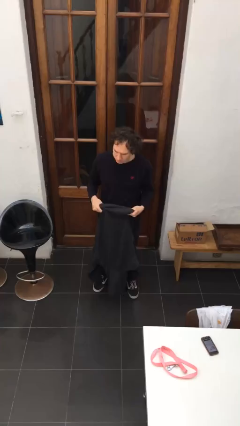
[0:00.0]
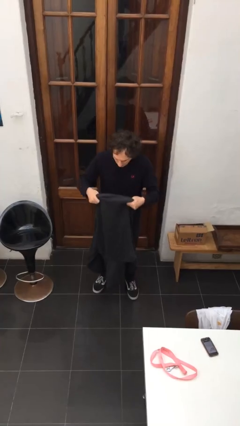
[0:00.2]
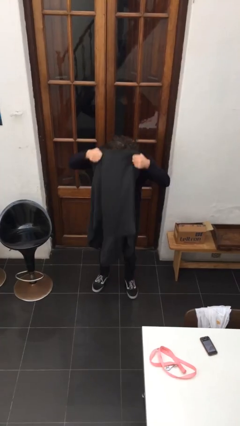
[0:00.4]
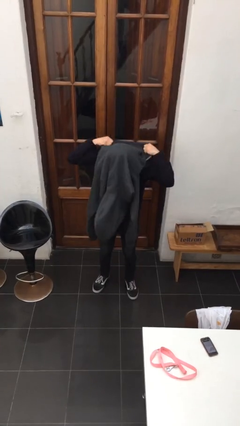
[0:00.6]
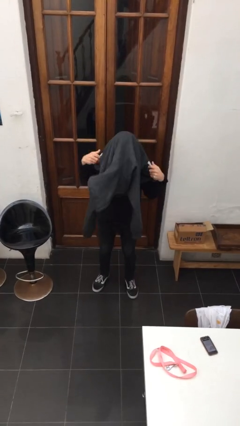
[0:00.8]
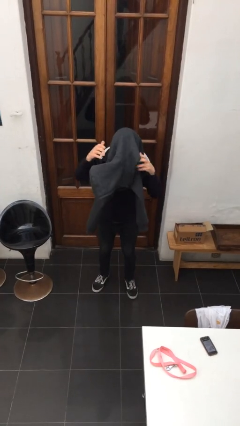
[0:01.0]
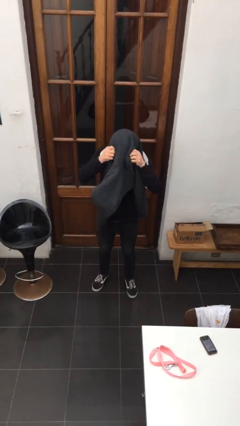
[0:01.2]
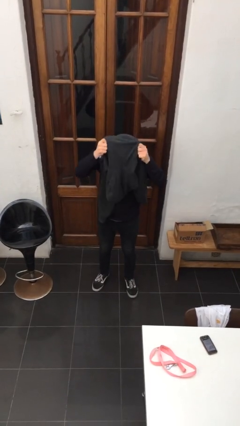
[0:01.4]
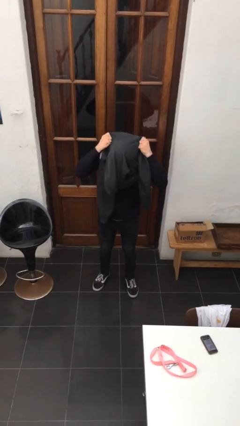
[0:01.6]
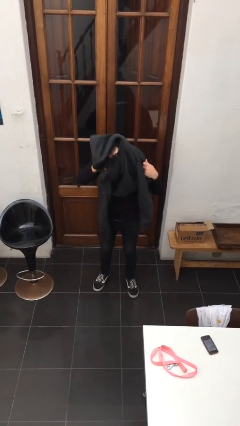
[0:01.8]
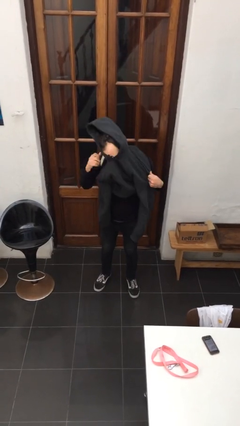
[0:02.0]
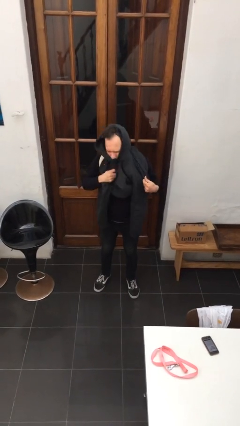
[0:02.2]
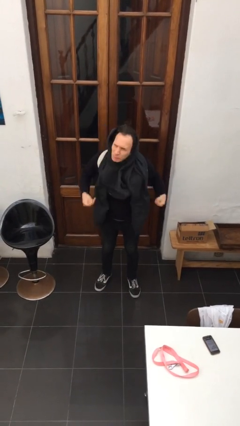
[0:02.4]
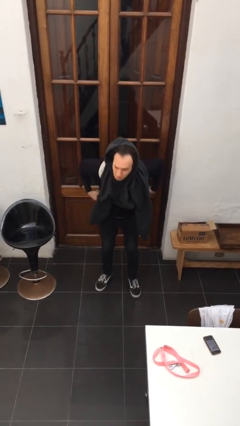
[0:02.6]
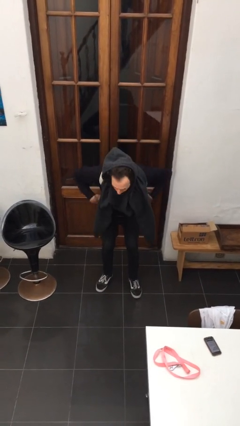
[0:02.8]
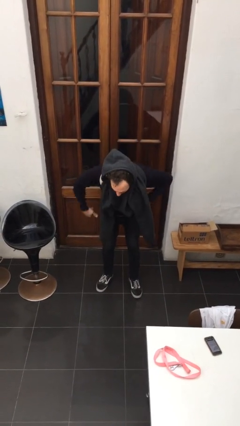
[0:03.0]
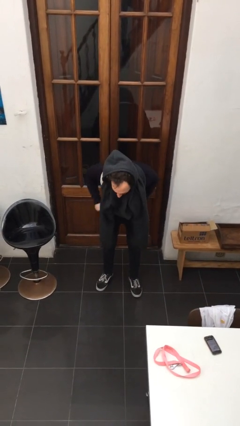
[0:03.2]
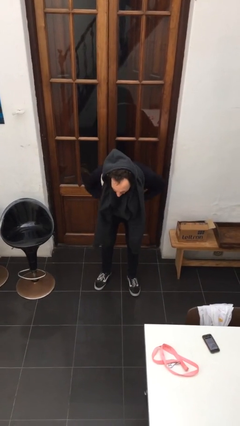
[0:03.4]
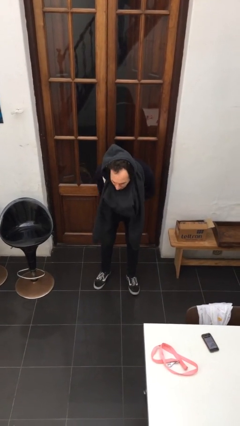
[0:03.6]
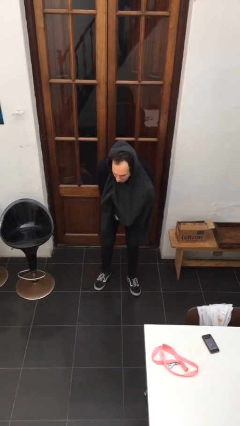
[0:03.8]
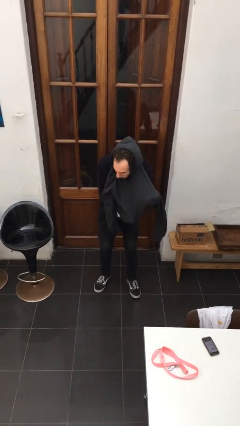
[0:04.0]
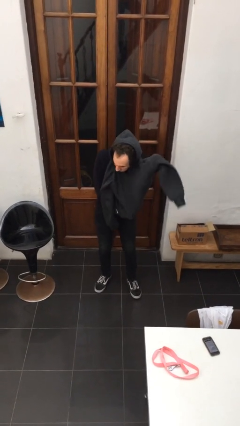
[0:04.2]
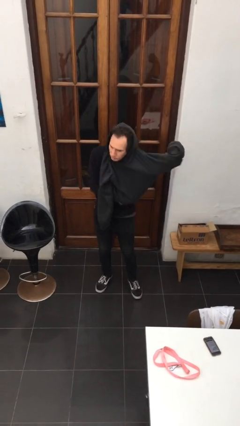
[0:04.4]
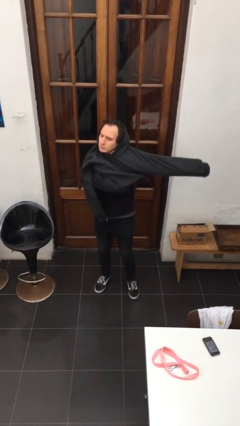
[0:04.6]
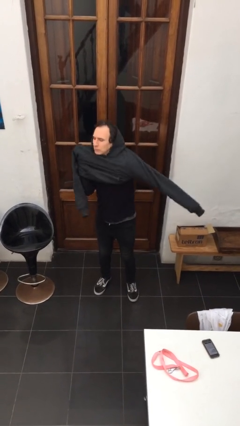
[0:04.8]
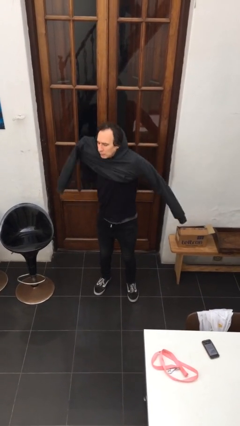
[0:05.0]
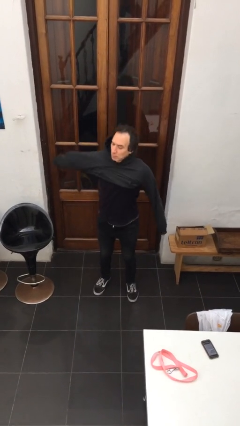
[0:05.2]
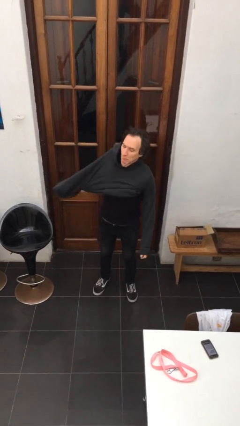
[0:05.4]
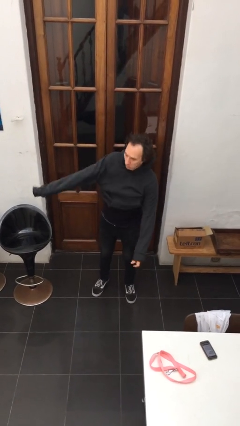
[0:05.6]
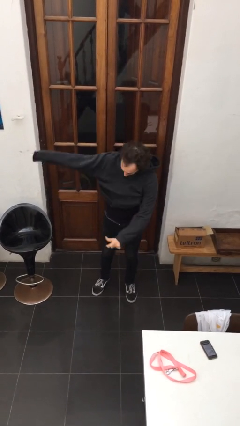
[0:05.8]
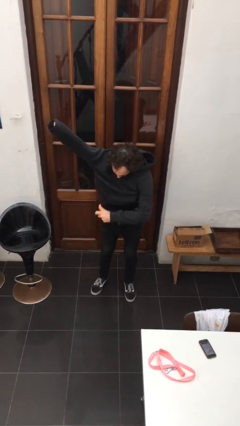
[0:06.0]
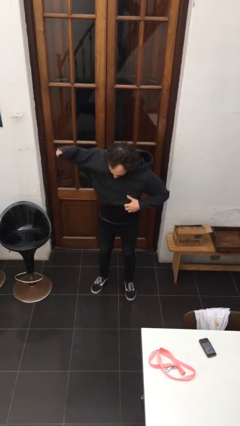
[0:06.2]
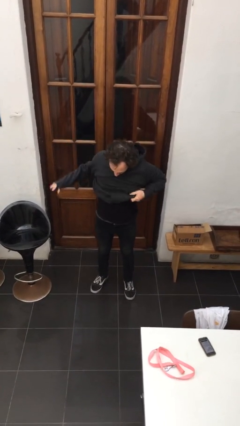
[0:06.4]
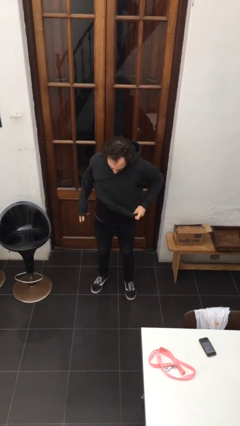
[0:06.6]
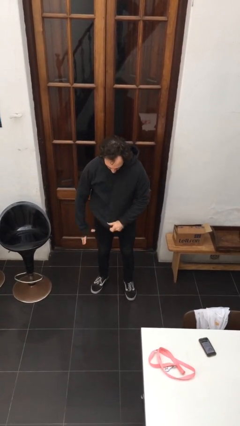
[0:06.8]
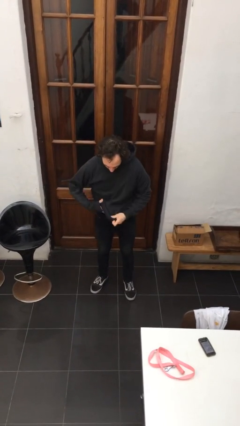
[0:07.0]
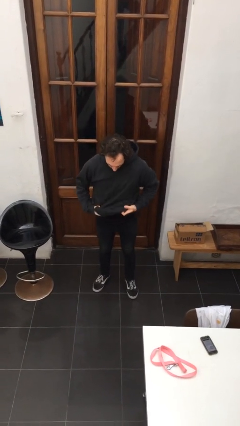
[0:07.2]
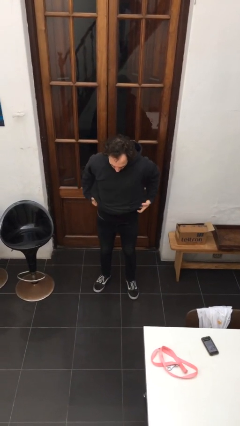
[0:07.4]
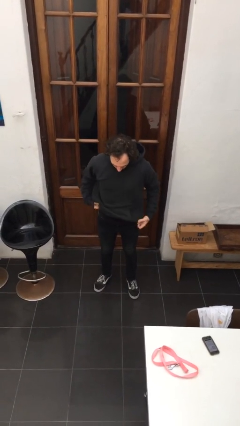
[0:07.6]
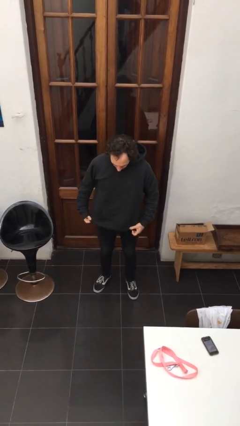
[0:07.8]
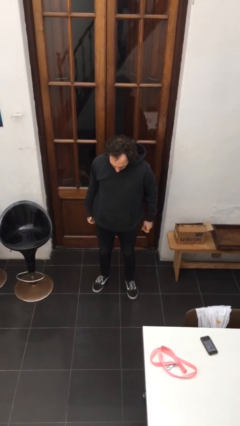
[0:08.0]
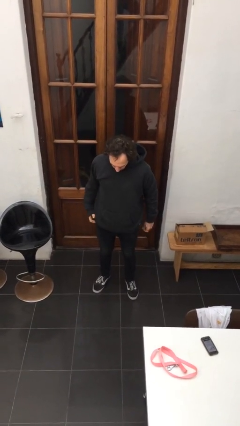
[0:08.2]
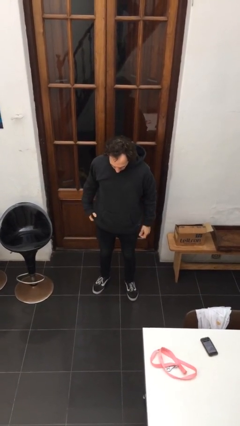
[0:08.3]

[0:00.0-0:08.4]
person puts on hoodie

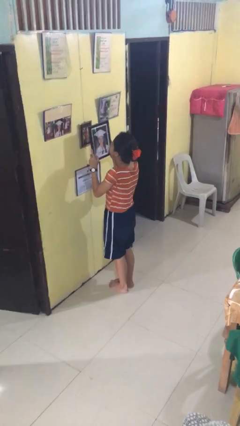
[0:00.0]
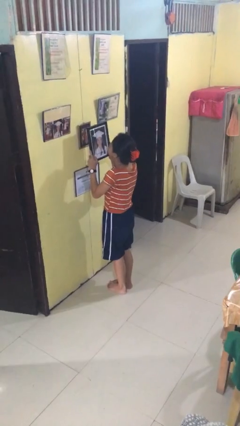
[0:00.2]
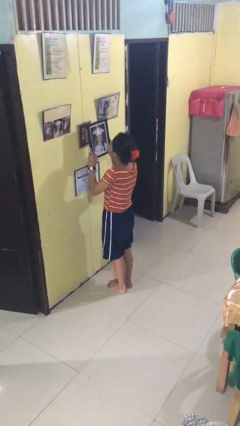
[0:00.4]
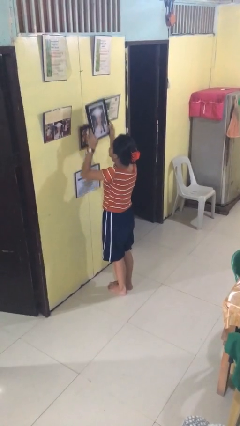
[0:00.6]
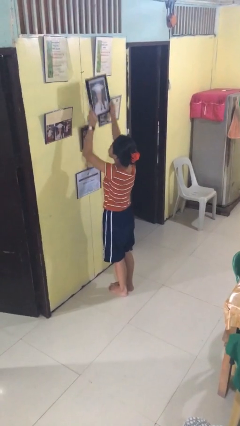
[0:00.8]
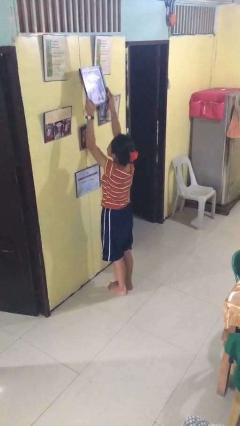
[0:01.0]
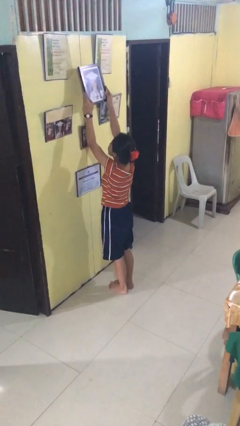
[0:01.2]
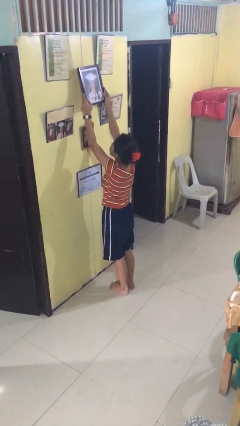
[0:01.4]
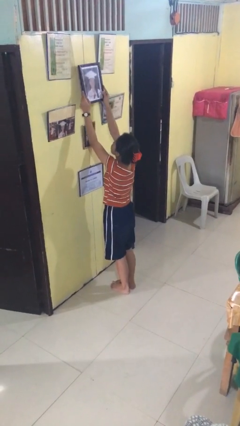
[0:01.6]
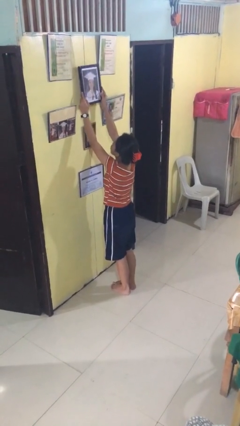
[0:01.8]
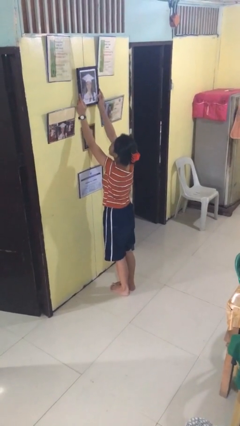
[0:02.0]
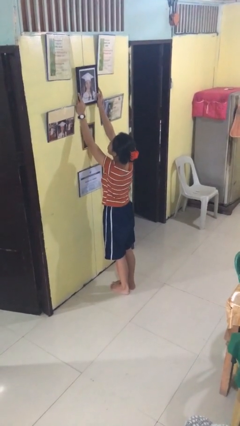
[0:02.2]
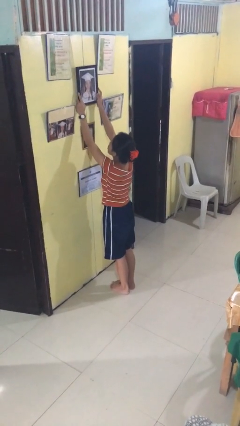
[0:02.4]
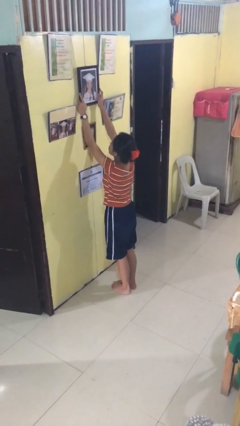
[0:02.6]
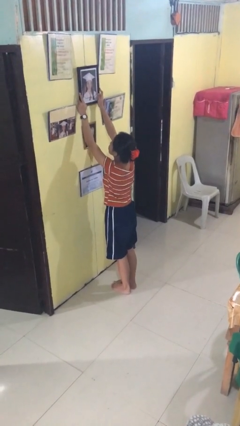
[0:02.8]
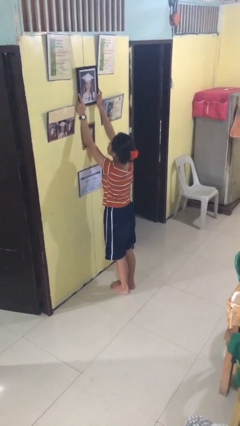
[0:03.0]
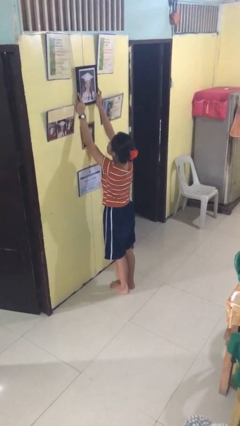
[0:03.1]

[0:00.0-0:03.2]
person puts up picture frame

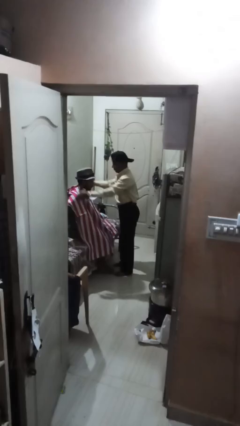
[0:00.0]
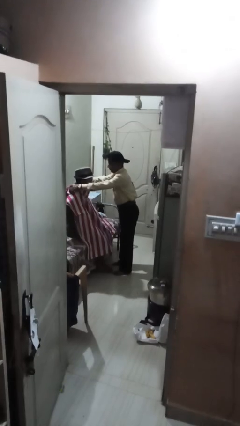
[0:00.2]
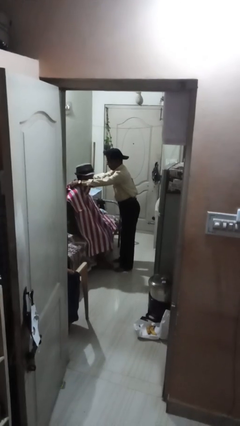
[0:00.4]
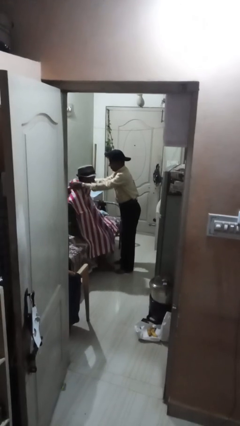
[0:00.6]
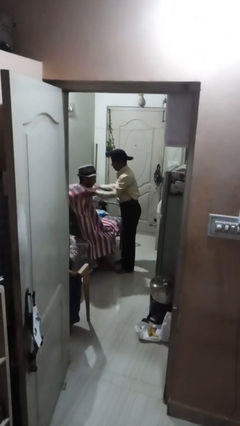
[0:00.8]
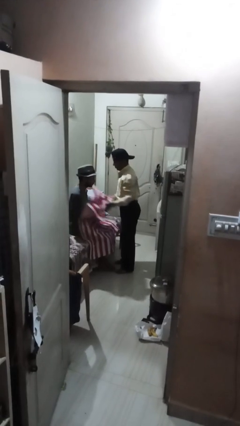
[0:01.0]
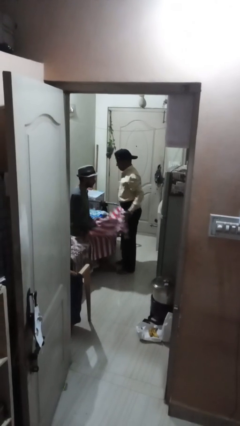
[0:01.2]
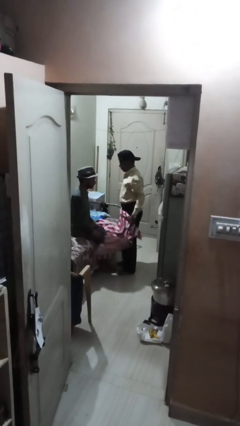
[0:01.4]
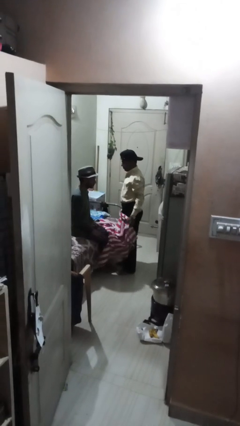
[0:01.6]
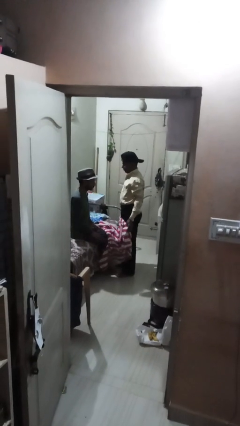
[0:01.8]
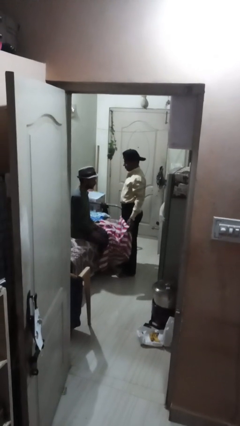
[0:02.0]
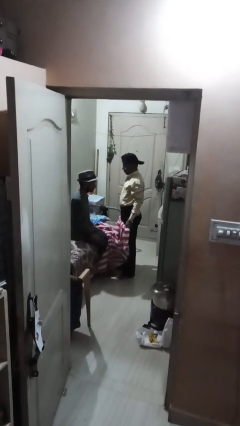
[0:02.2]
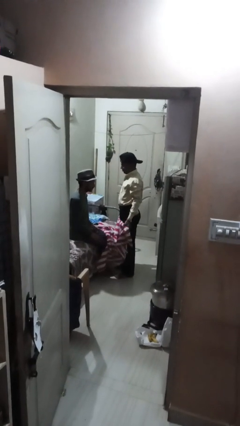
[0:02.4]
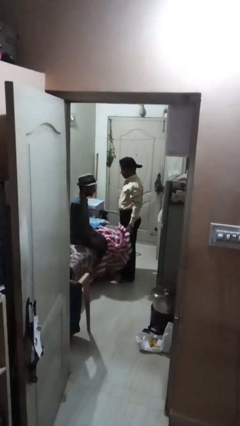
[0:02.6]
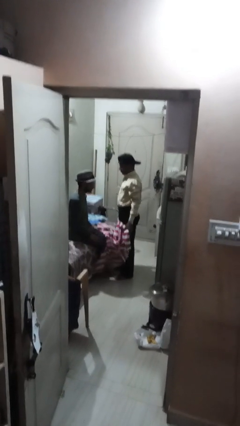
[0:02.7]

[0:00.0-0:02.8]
person uncovers friend with blanket

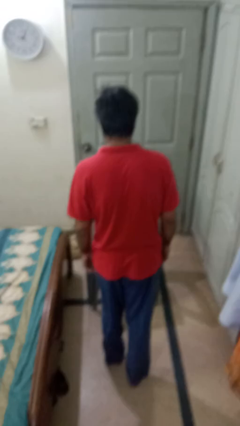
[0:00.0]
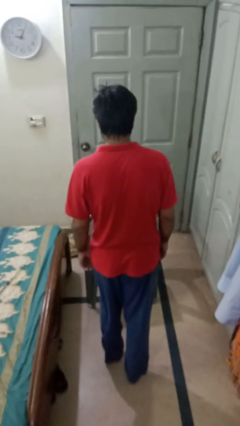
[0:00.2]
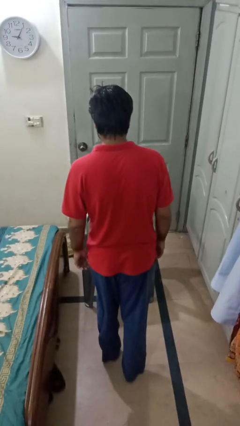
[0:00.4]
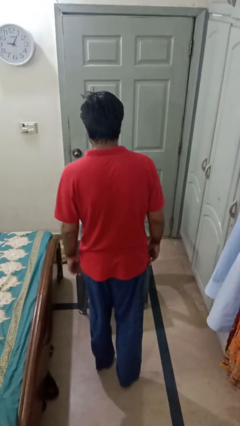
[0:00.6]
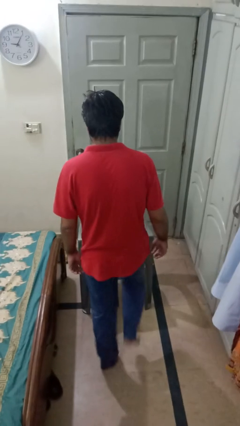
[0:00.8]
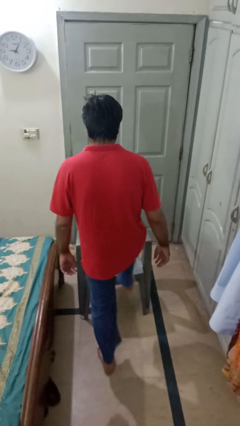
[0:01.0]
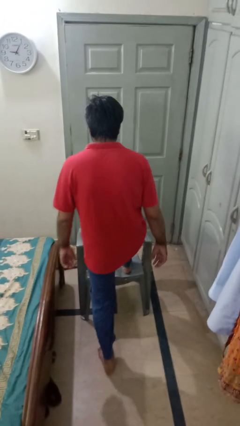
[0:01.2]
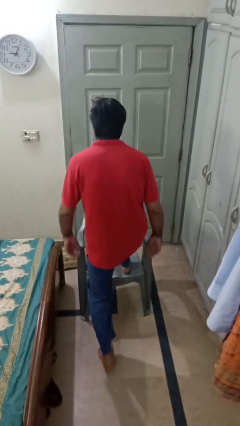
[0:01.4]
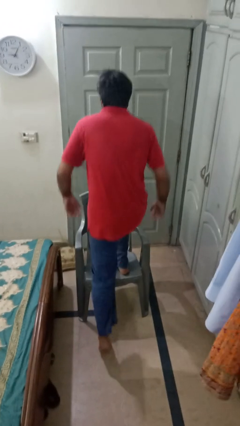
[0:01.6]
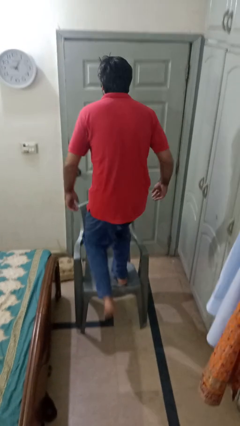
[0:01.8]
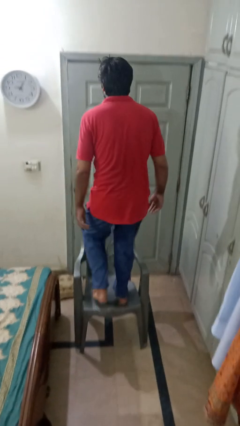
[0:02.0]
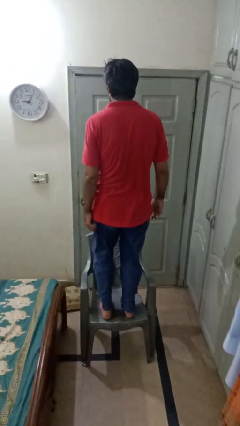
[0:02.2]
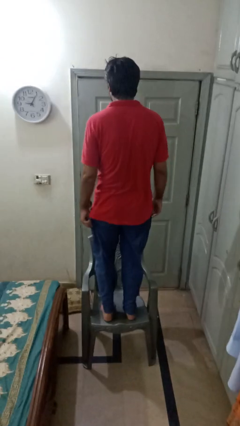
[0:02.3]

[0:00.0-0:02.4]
person climbs on chair

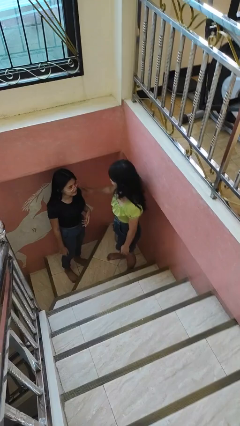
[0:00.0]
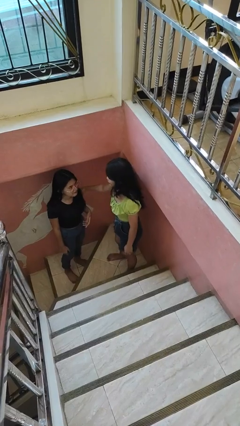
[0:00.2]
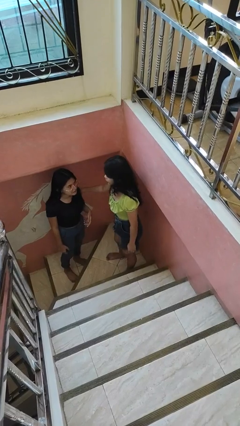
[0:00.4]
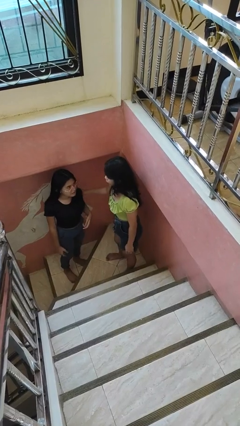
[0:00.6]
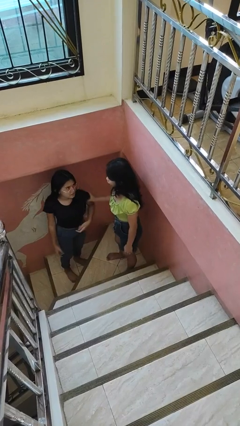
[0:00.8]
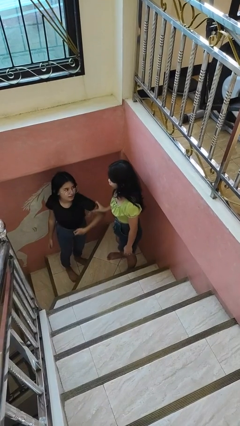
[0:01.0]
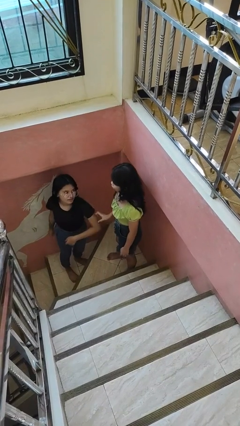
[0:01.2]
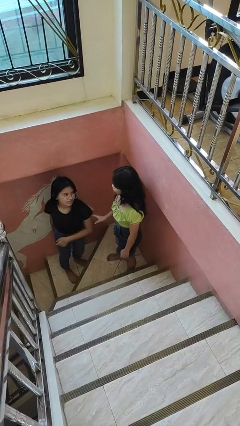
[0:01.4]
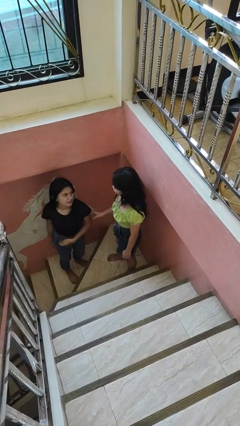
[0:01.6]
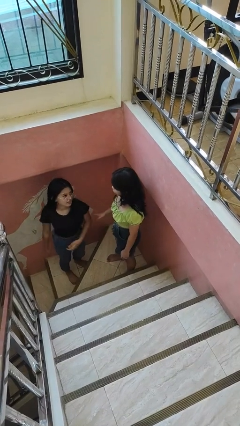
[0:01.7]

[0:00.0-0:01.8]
person grabs person by bicep
